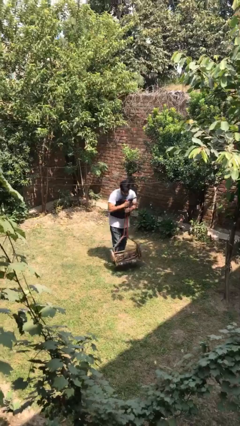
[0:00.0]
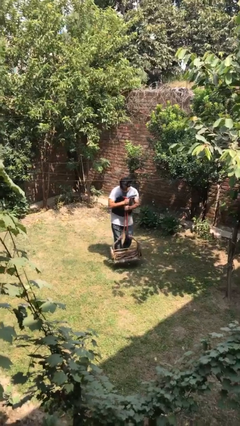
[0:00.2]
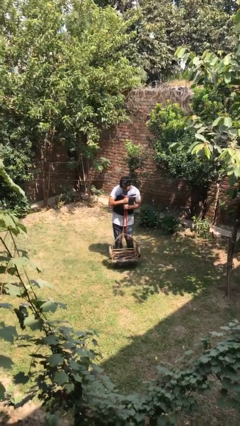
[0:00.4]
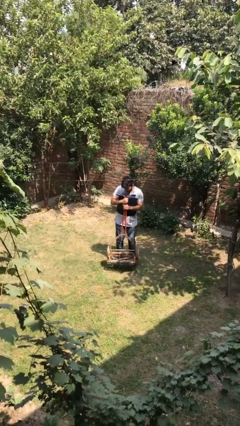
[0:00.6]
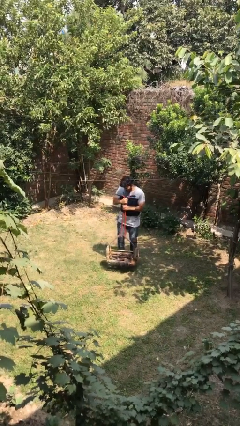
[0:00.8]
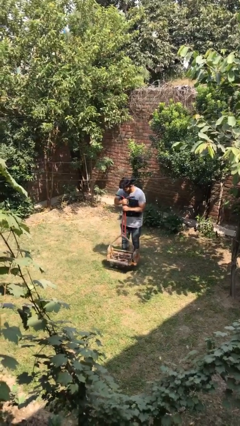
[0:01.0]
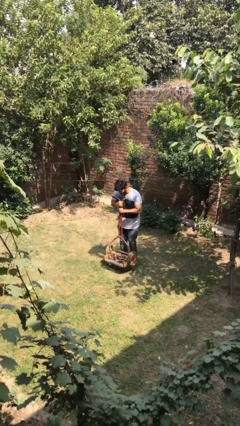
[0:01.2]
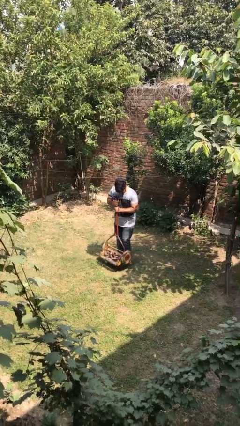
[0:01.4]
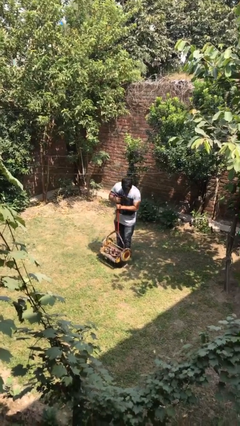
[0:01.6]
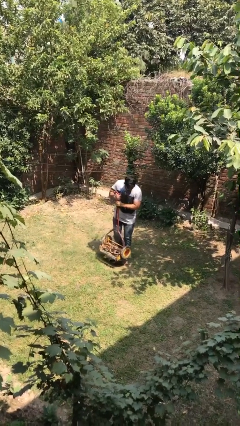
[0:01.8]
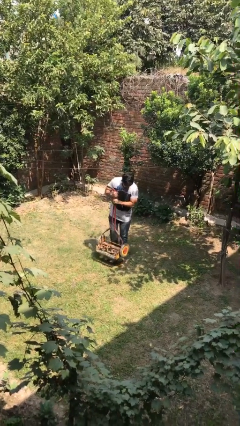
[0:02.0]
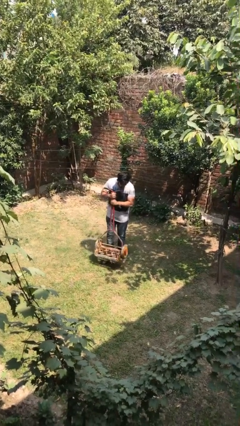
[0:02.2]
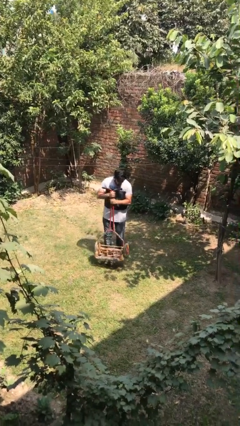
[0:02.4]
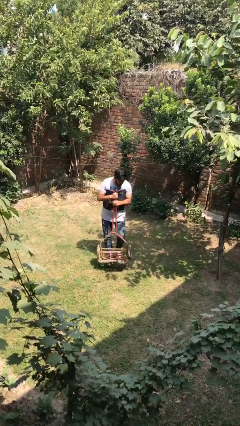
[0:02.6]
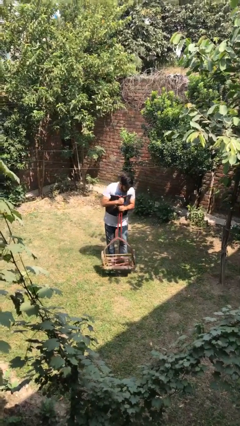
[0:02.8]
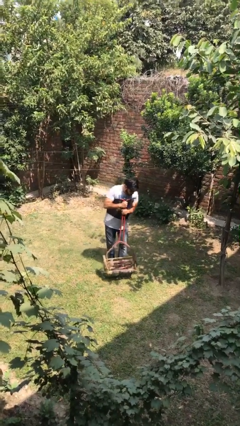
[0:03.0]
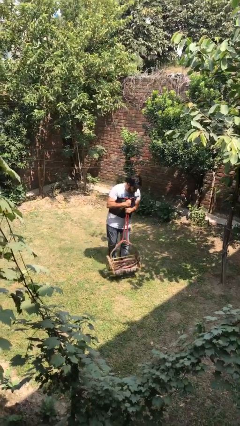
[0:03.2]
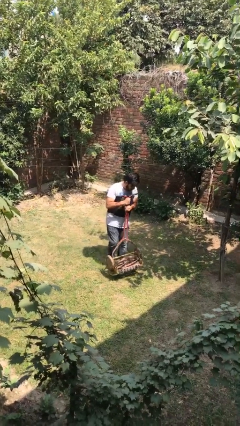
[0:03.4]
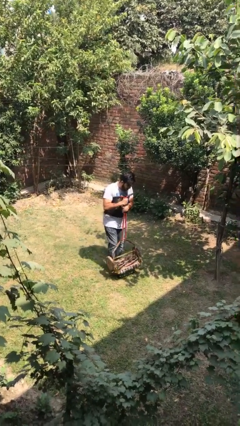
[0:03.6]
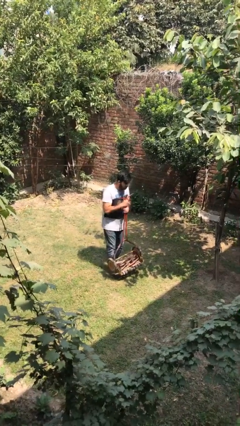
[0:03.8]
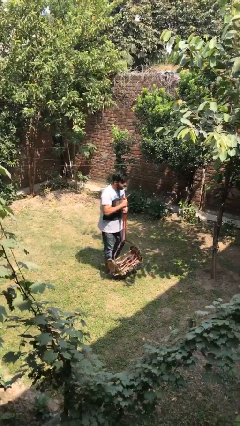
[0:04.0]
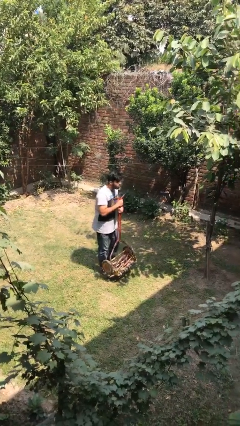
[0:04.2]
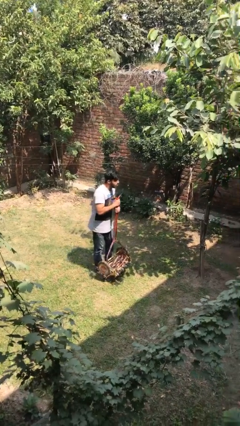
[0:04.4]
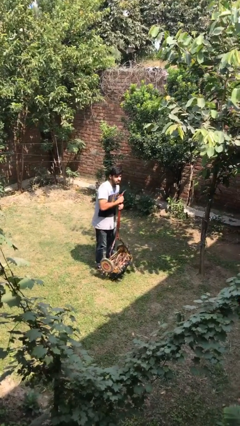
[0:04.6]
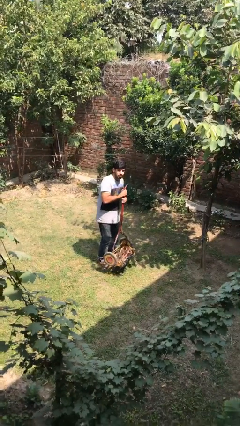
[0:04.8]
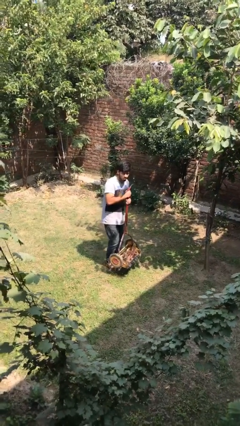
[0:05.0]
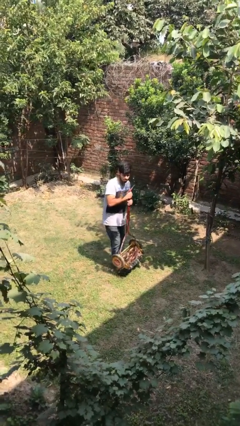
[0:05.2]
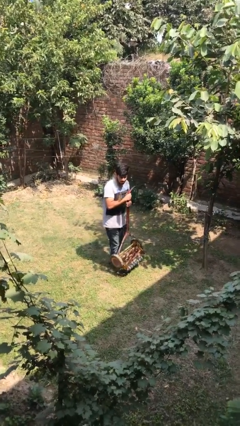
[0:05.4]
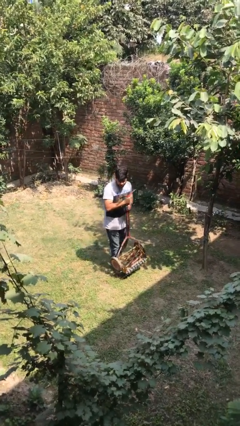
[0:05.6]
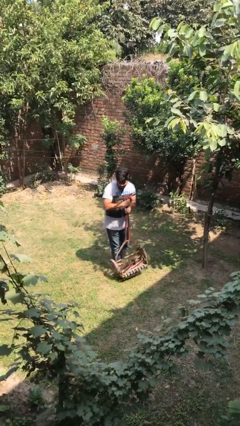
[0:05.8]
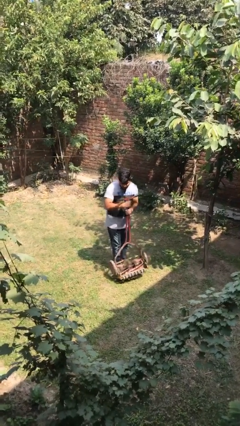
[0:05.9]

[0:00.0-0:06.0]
person carries heavy object

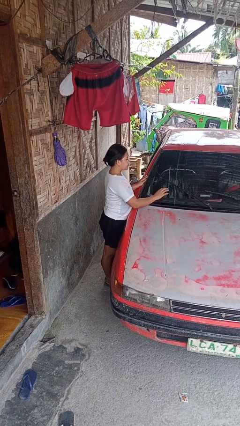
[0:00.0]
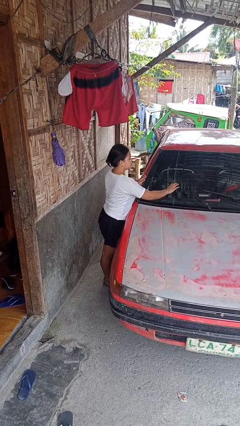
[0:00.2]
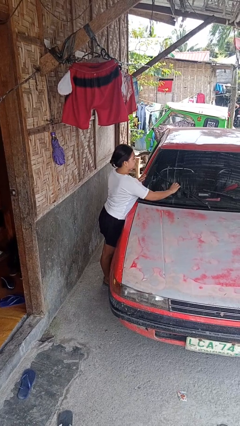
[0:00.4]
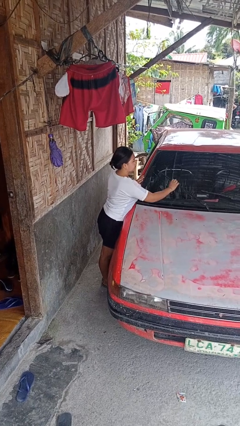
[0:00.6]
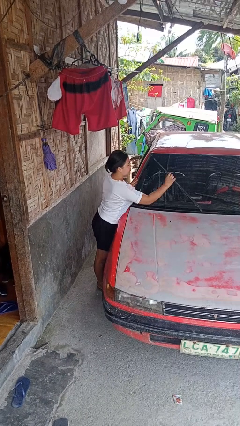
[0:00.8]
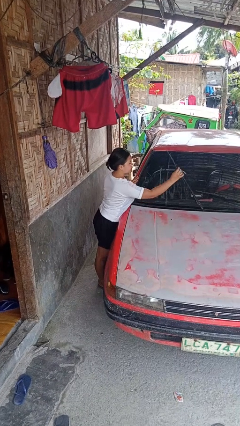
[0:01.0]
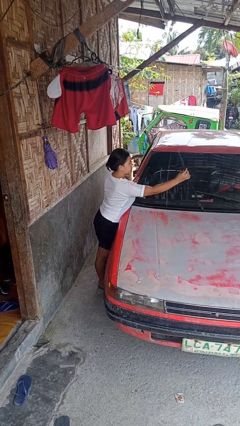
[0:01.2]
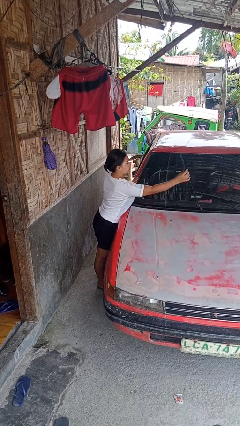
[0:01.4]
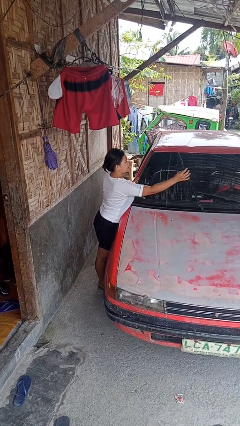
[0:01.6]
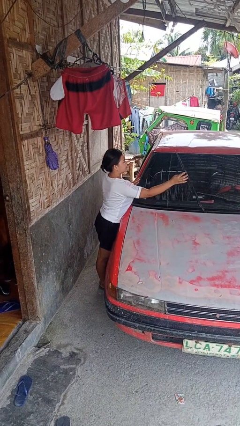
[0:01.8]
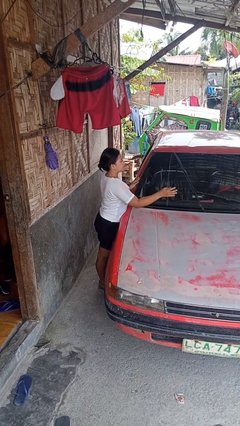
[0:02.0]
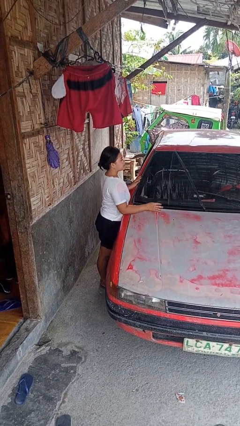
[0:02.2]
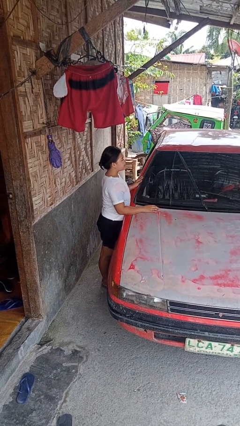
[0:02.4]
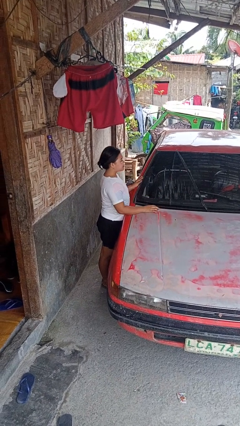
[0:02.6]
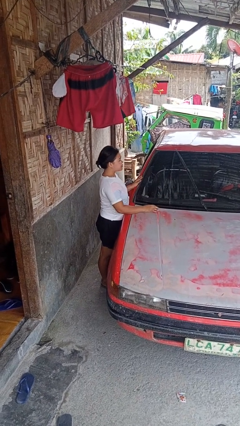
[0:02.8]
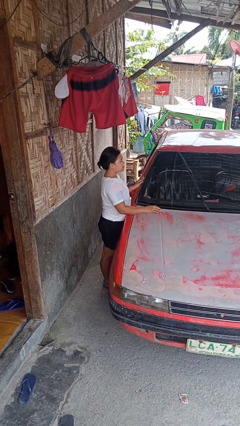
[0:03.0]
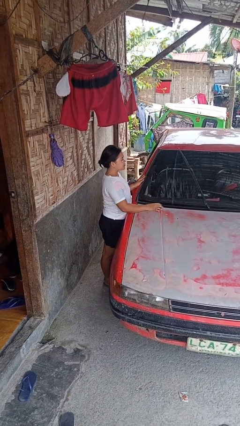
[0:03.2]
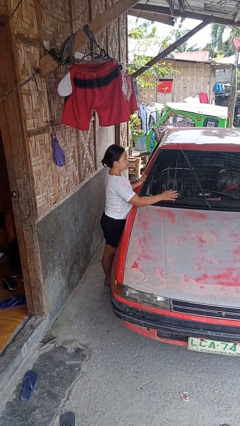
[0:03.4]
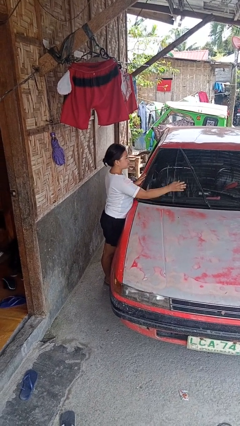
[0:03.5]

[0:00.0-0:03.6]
person flips up car wipers

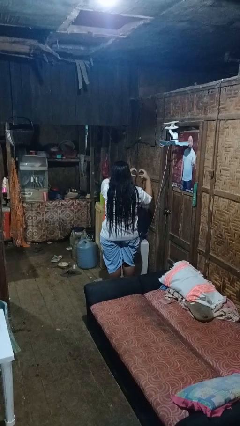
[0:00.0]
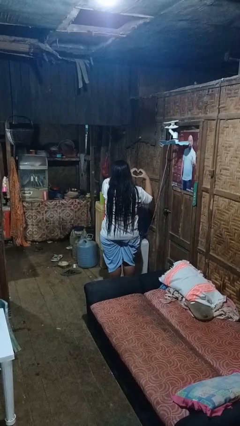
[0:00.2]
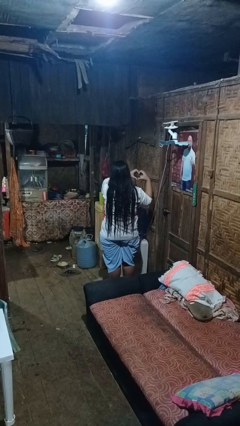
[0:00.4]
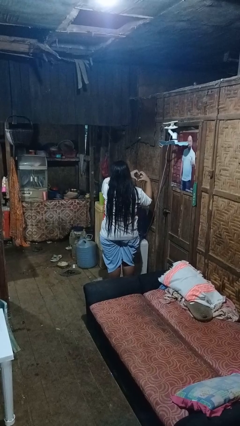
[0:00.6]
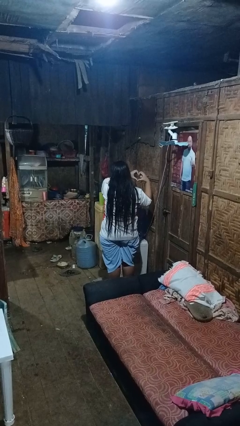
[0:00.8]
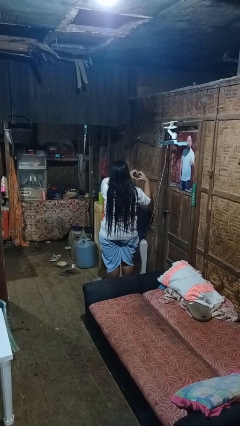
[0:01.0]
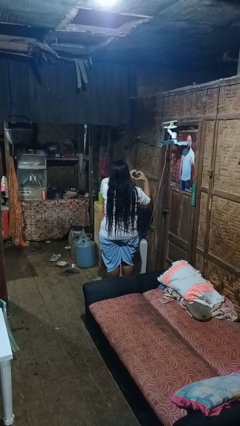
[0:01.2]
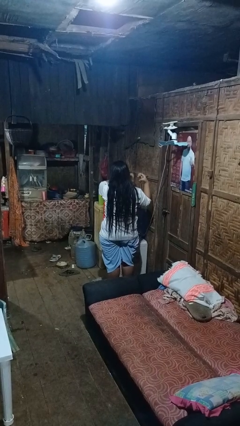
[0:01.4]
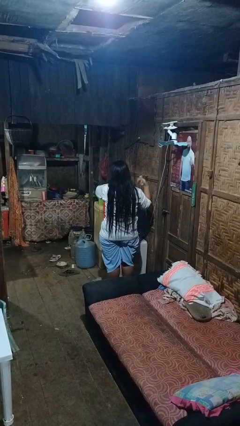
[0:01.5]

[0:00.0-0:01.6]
person gestures heart

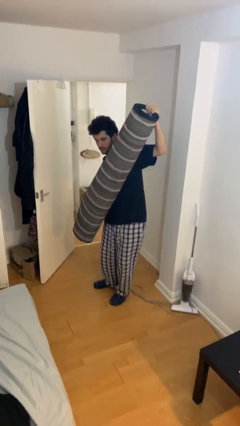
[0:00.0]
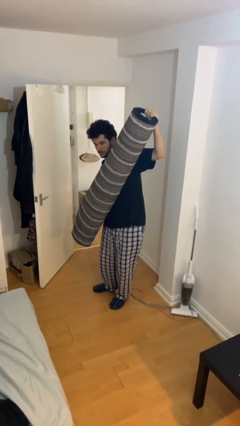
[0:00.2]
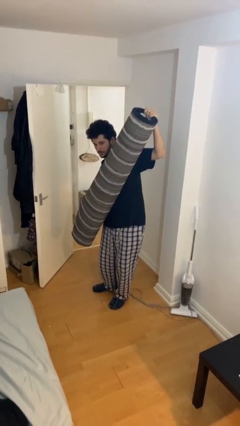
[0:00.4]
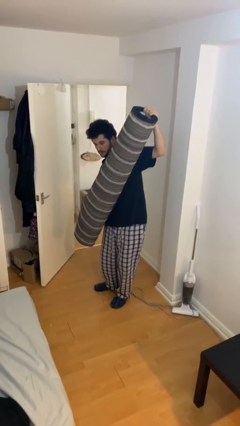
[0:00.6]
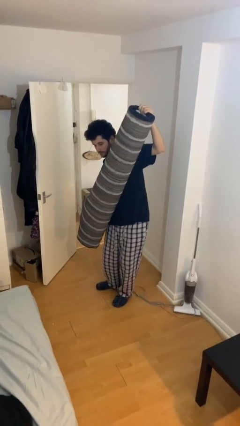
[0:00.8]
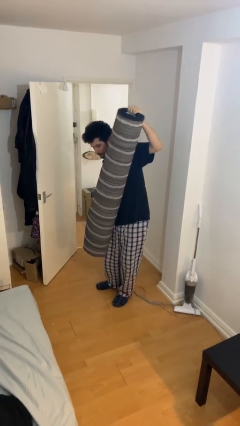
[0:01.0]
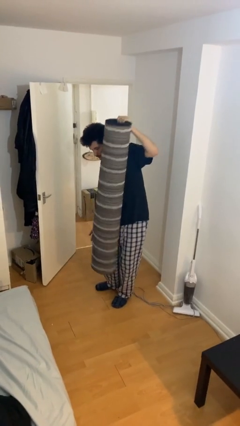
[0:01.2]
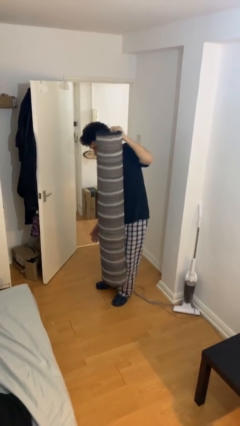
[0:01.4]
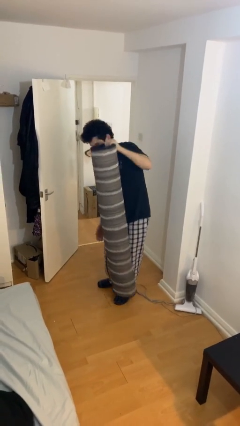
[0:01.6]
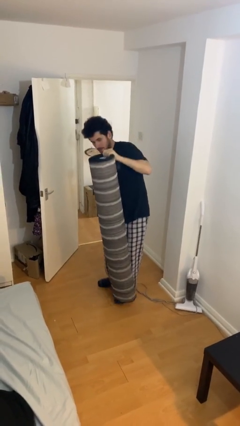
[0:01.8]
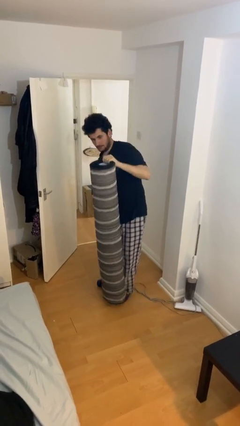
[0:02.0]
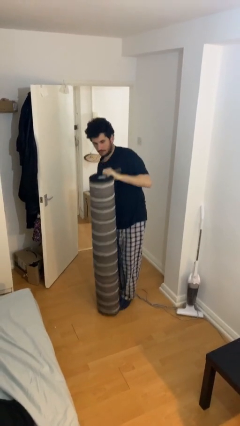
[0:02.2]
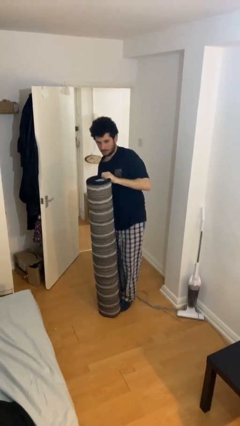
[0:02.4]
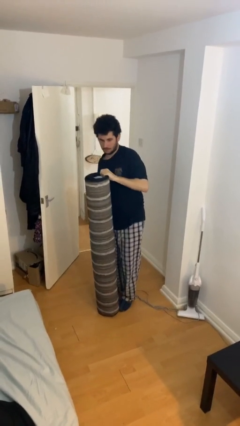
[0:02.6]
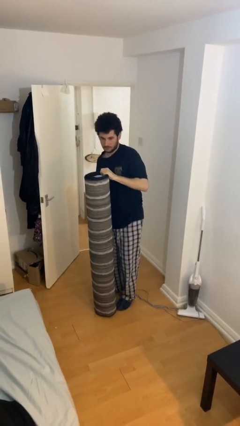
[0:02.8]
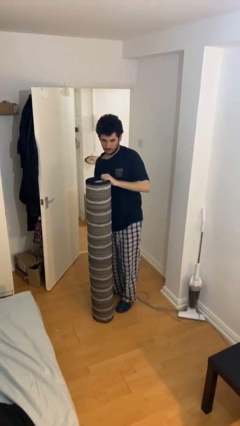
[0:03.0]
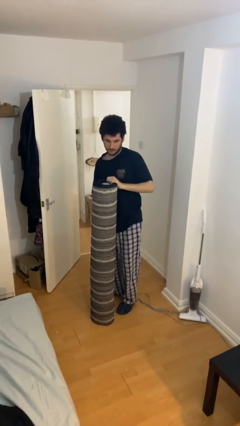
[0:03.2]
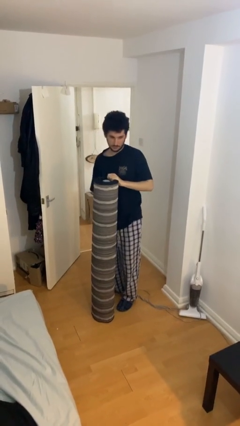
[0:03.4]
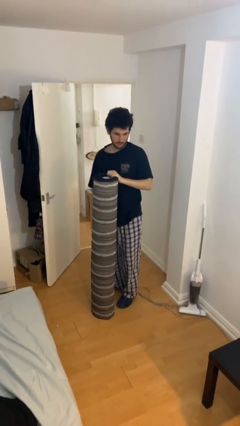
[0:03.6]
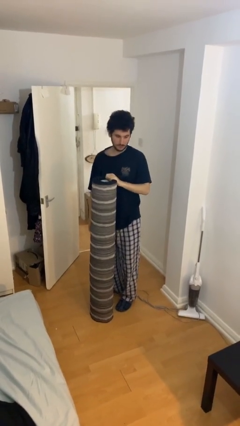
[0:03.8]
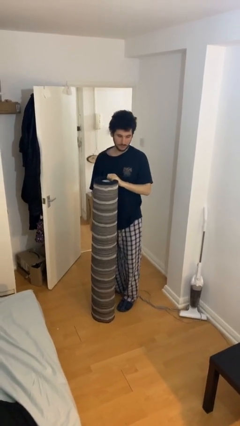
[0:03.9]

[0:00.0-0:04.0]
person puts down object on floor

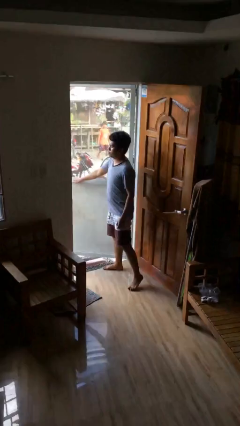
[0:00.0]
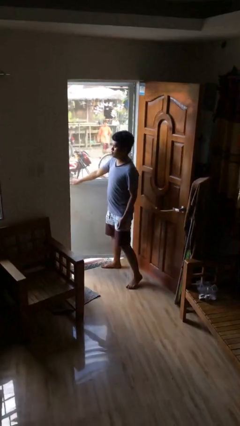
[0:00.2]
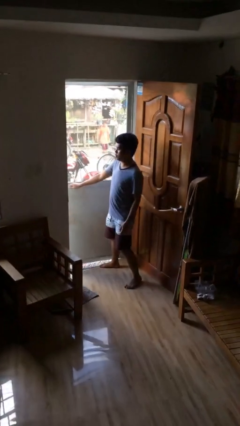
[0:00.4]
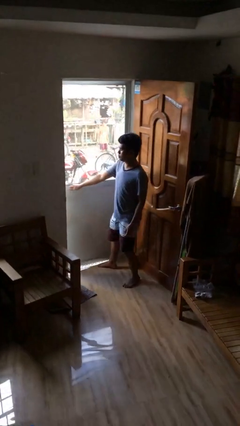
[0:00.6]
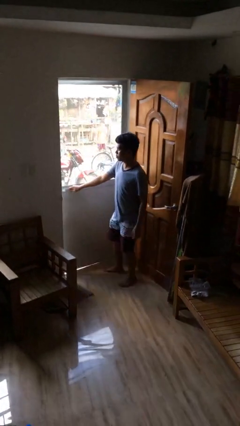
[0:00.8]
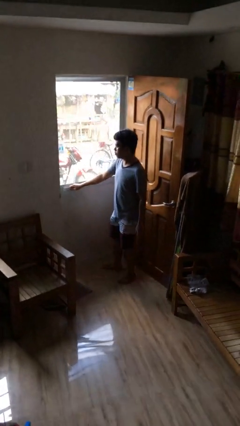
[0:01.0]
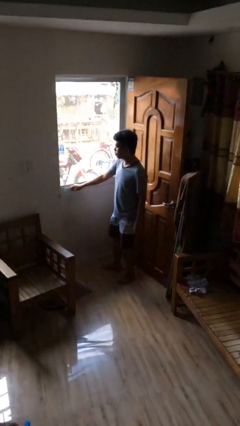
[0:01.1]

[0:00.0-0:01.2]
person closes facility door

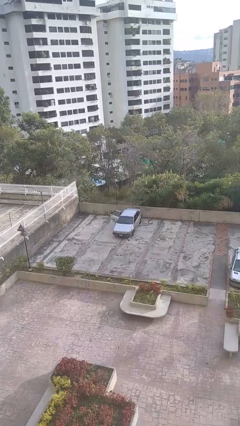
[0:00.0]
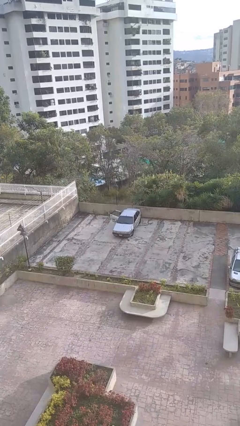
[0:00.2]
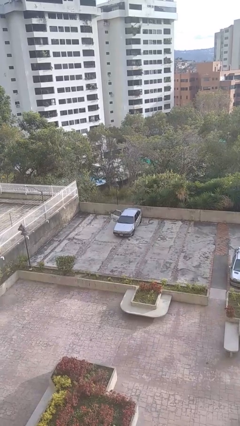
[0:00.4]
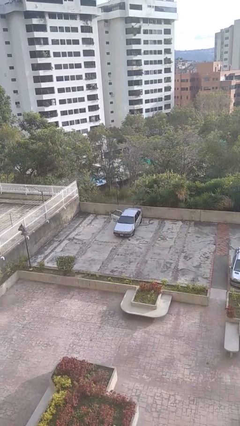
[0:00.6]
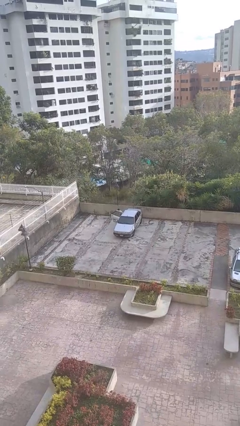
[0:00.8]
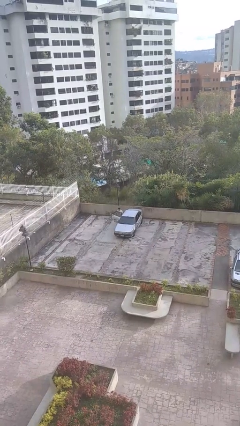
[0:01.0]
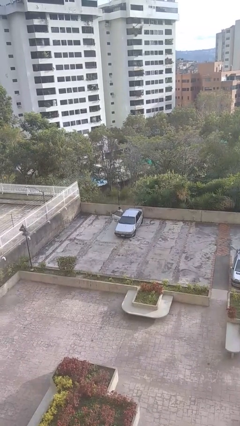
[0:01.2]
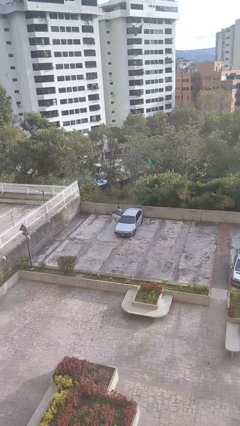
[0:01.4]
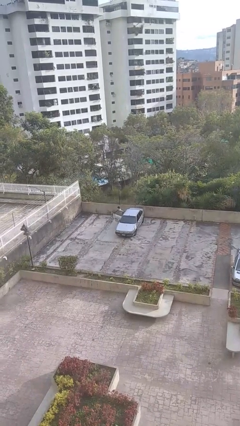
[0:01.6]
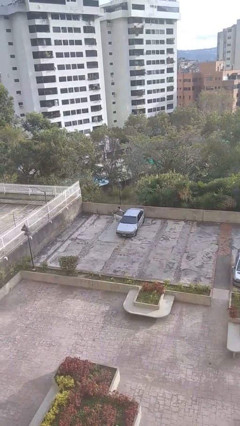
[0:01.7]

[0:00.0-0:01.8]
person exits car
